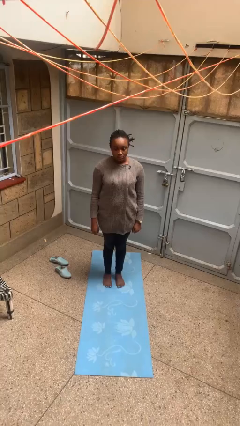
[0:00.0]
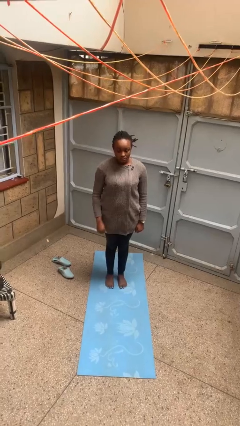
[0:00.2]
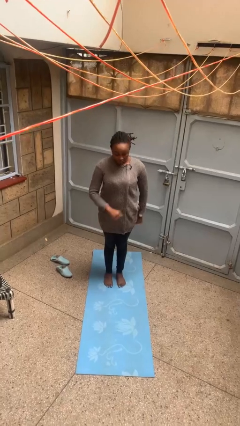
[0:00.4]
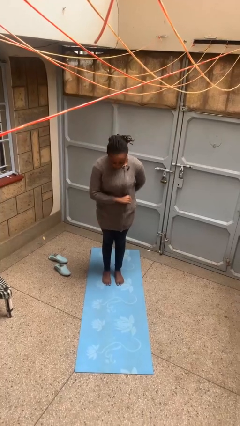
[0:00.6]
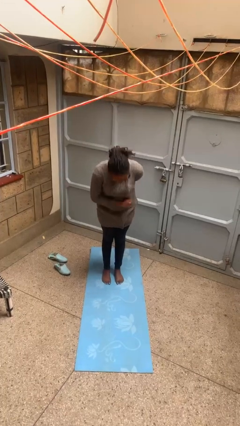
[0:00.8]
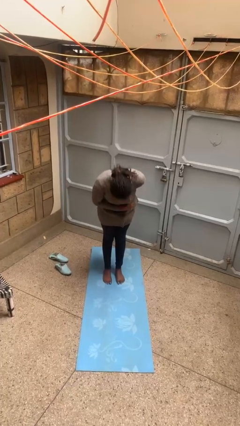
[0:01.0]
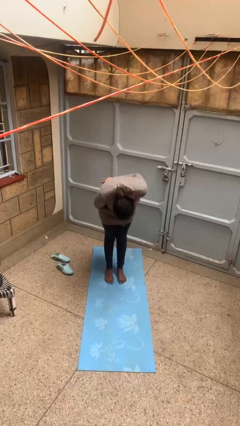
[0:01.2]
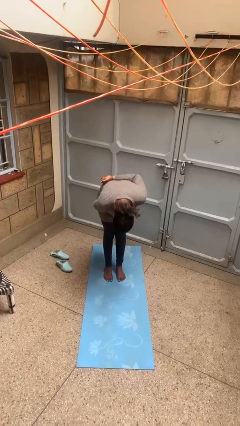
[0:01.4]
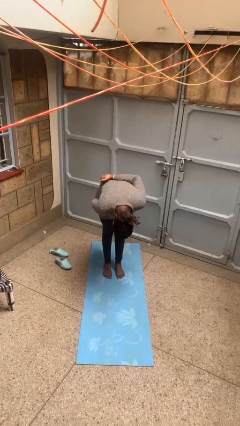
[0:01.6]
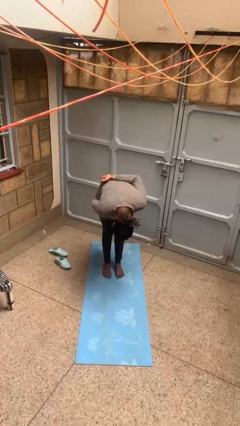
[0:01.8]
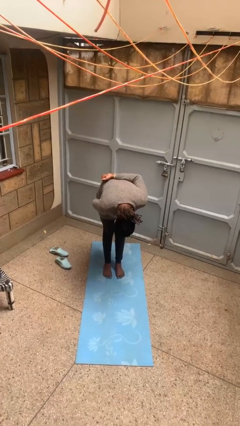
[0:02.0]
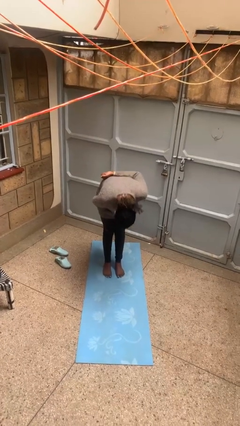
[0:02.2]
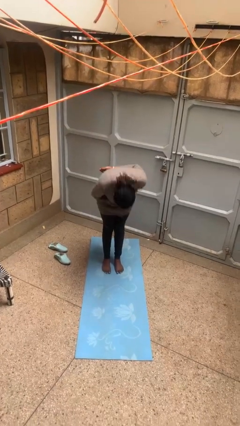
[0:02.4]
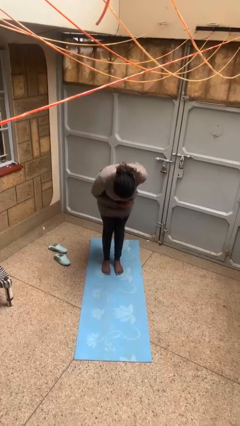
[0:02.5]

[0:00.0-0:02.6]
person bows

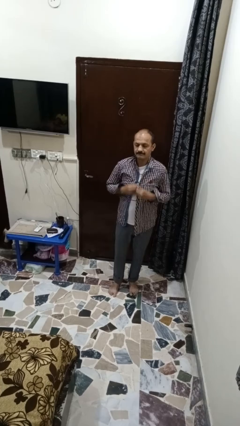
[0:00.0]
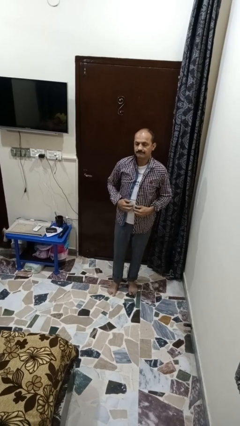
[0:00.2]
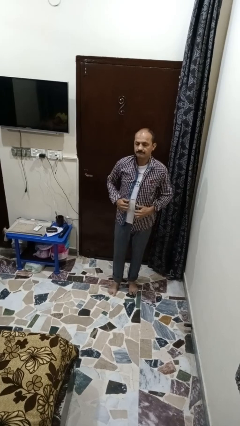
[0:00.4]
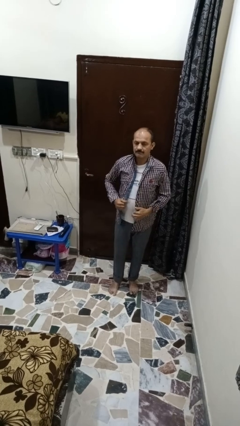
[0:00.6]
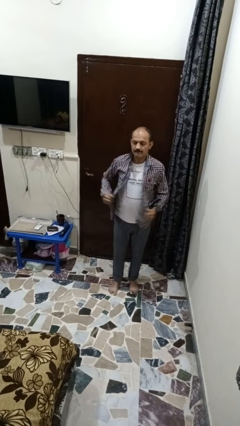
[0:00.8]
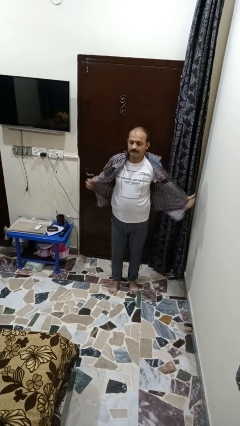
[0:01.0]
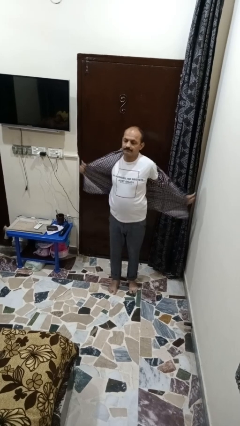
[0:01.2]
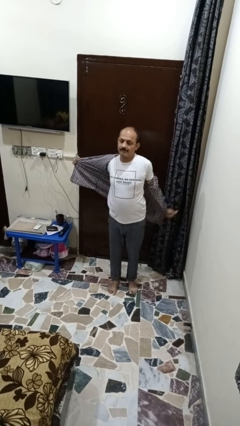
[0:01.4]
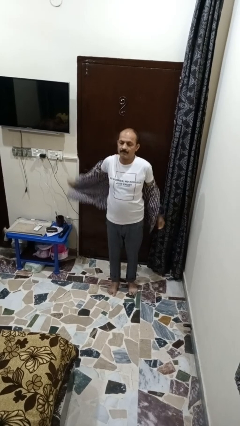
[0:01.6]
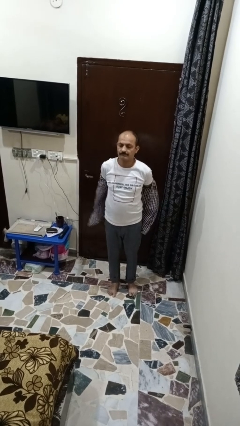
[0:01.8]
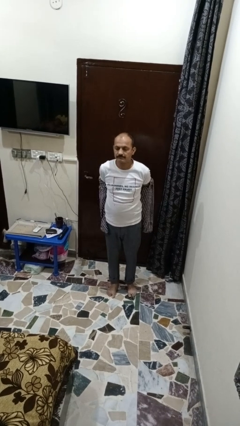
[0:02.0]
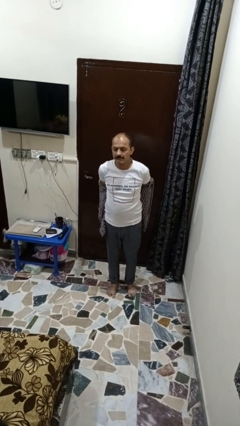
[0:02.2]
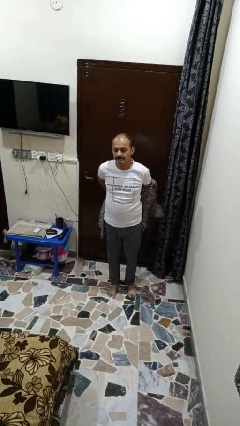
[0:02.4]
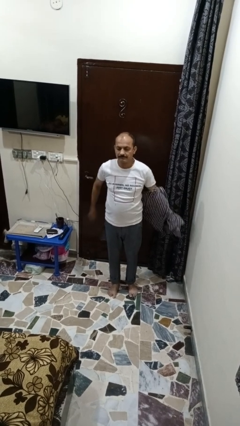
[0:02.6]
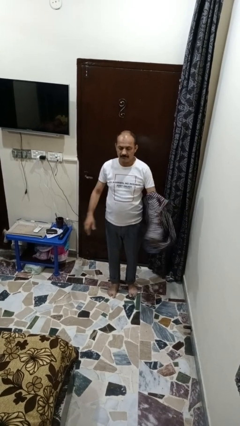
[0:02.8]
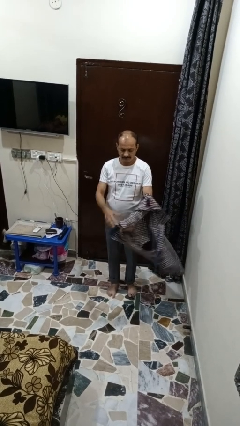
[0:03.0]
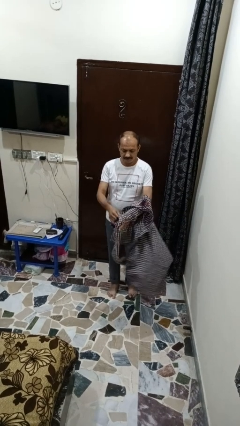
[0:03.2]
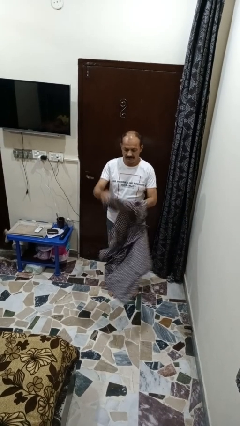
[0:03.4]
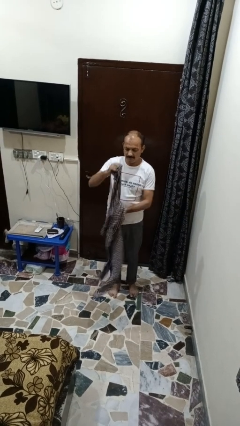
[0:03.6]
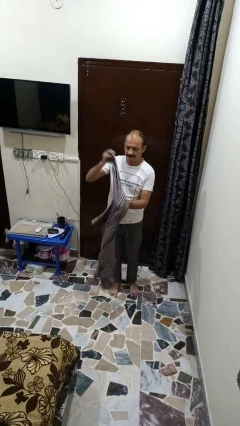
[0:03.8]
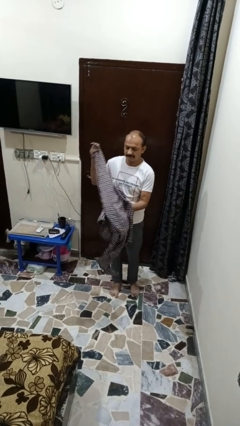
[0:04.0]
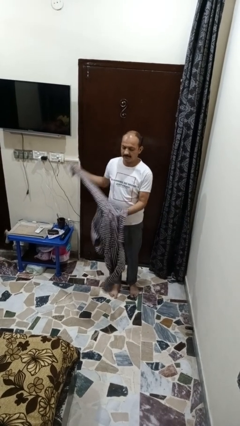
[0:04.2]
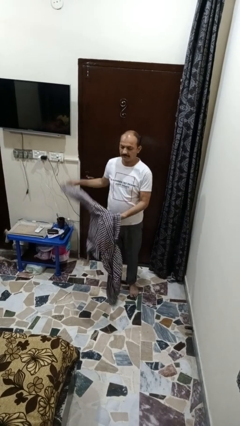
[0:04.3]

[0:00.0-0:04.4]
person takes off shirt

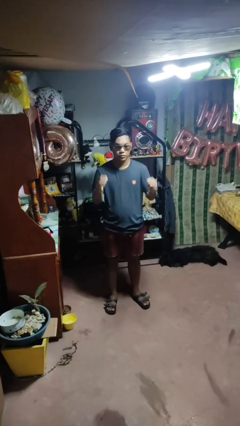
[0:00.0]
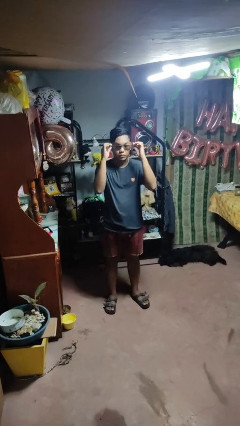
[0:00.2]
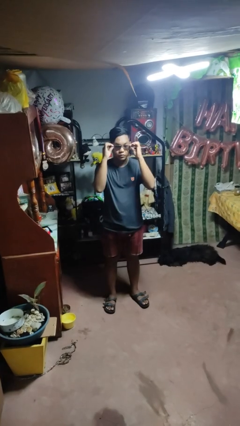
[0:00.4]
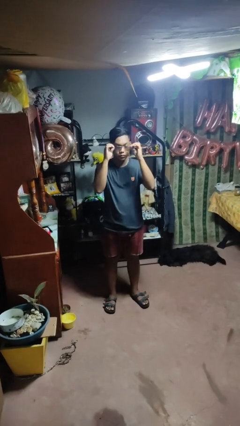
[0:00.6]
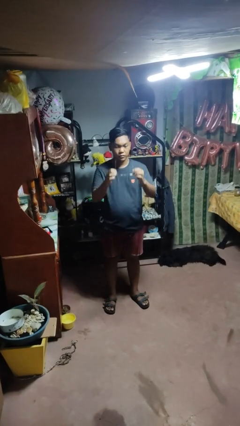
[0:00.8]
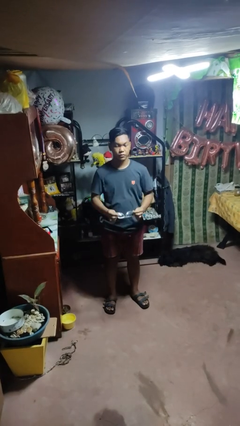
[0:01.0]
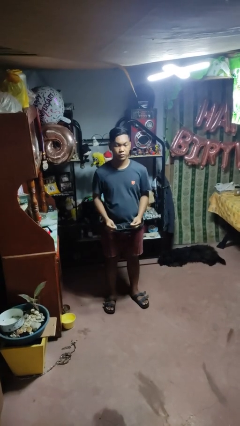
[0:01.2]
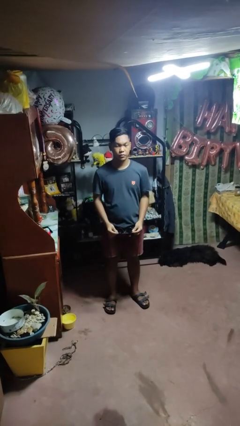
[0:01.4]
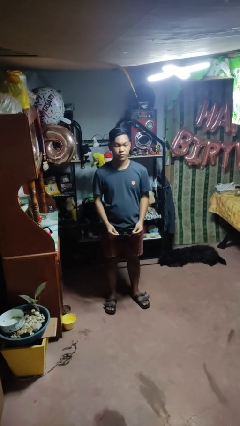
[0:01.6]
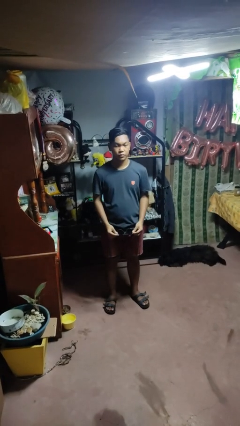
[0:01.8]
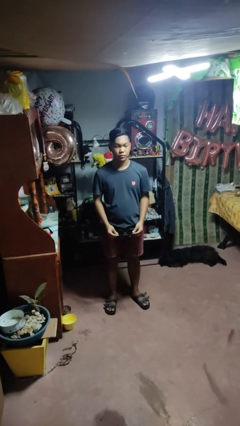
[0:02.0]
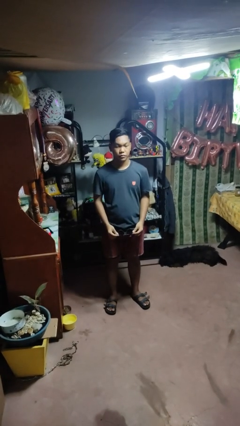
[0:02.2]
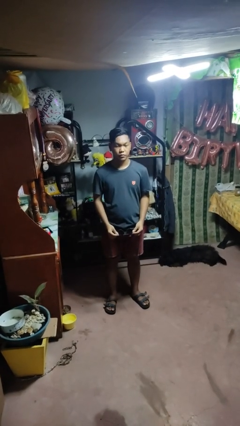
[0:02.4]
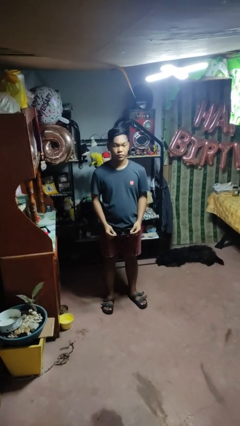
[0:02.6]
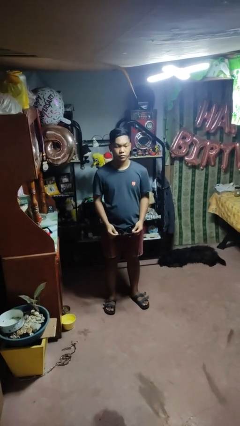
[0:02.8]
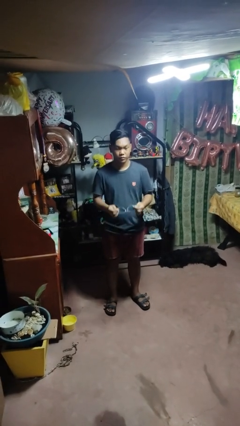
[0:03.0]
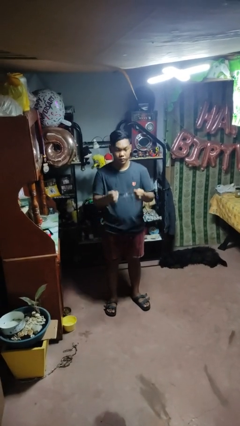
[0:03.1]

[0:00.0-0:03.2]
person takes off sunglasses

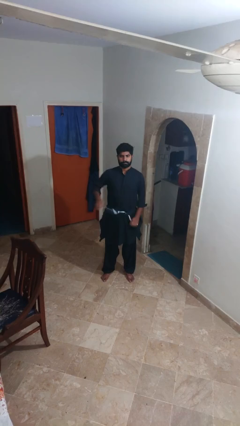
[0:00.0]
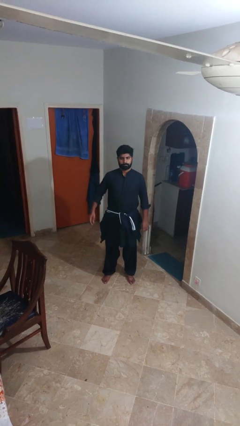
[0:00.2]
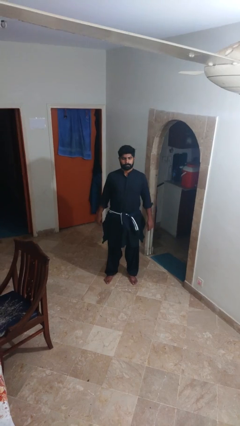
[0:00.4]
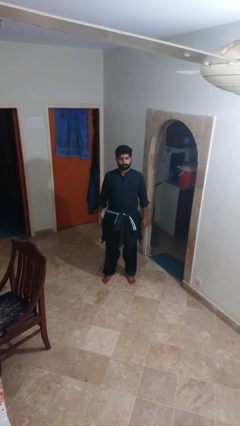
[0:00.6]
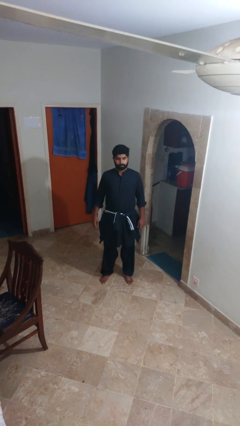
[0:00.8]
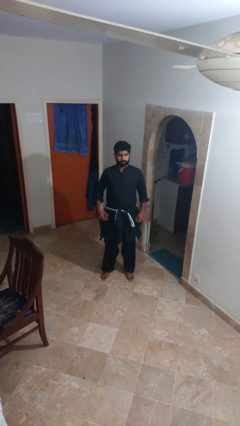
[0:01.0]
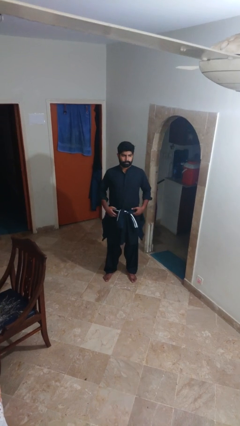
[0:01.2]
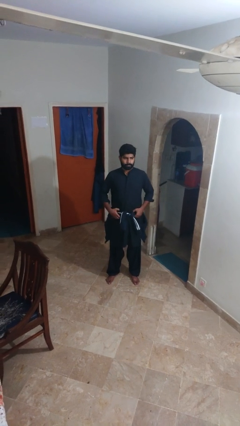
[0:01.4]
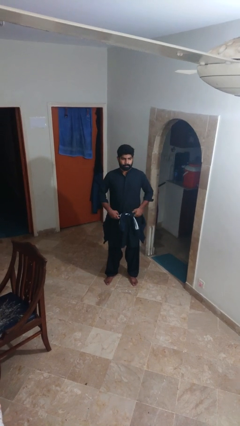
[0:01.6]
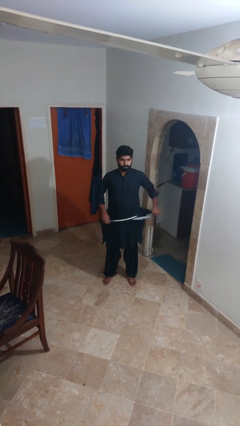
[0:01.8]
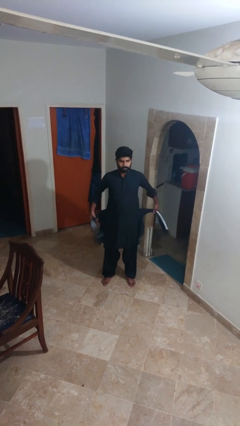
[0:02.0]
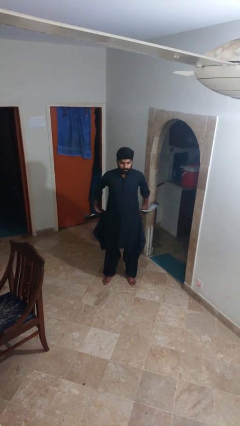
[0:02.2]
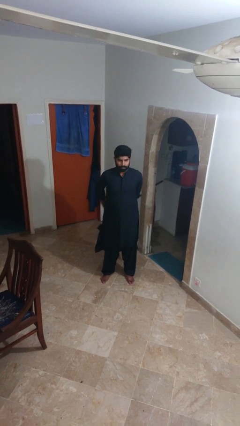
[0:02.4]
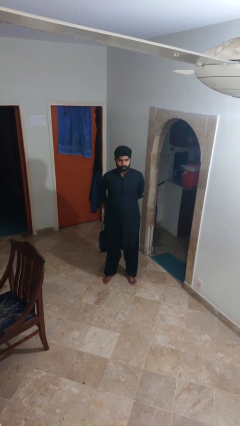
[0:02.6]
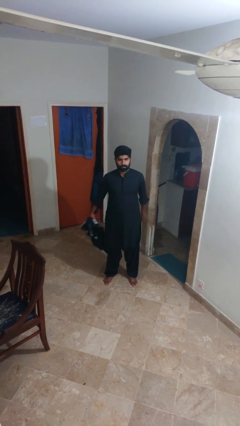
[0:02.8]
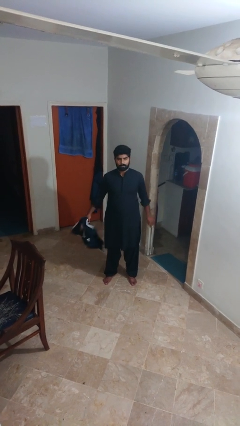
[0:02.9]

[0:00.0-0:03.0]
person unties jacket around waist

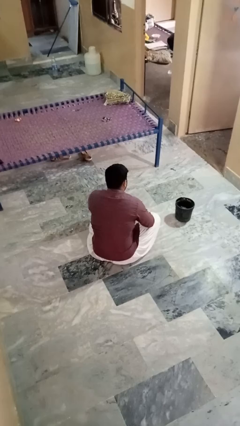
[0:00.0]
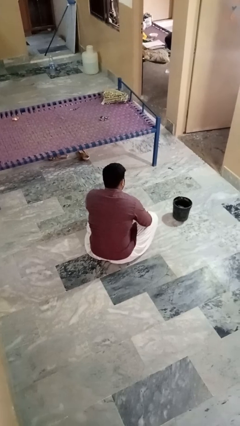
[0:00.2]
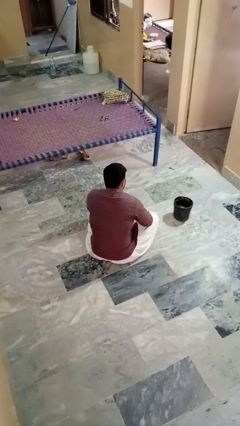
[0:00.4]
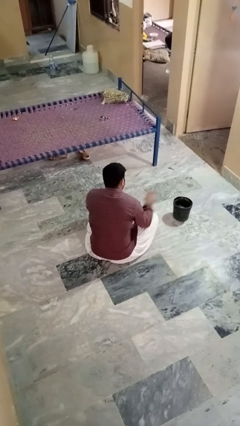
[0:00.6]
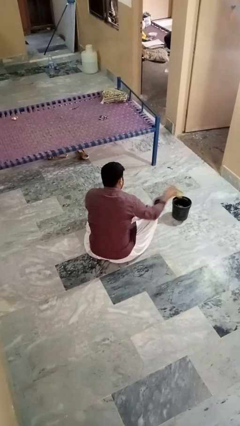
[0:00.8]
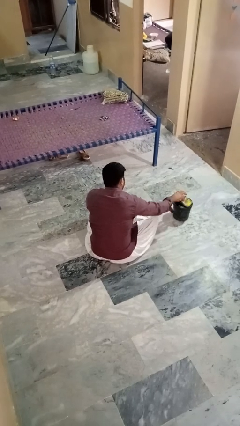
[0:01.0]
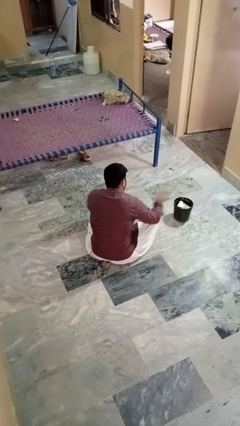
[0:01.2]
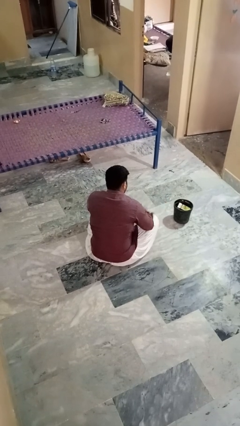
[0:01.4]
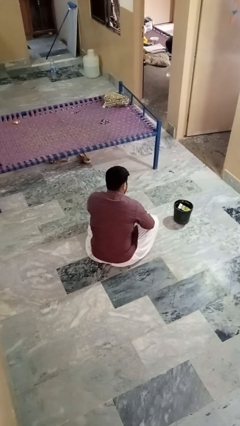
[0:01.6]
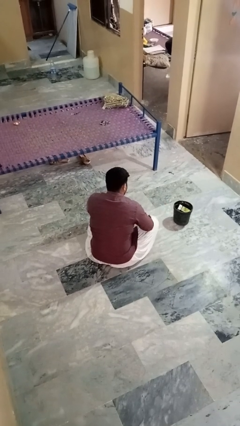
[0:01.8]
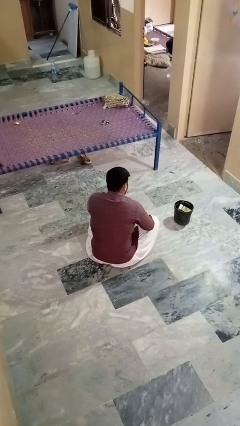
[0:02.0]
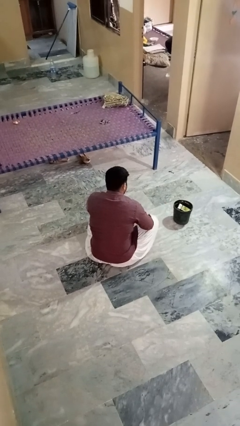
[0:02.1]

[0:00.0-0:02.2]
person puts object into basket

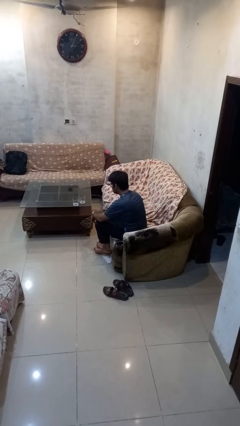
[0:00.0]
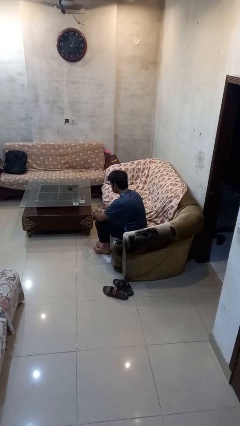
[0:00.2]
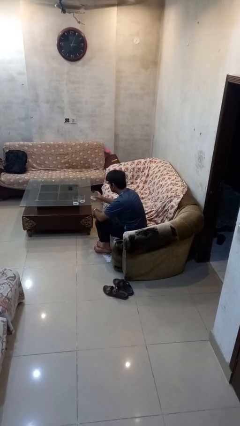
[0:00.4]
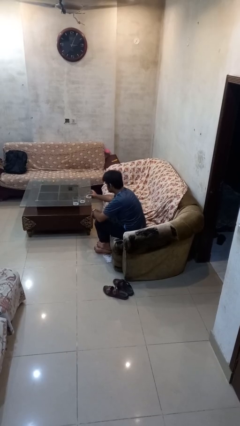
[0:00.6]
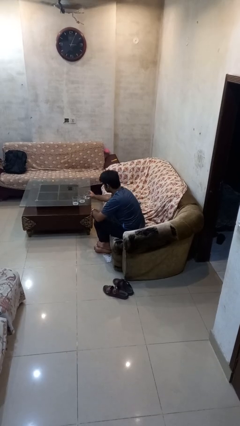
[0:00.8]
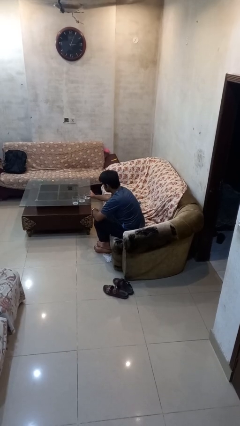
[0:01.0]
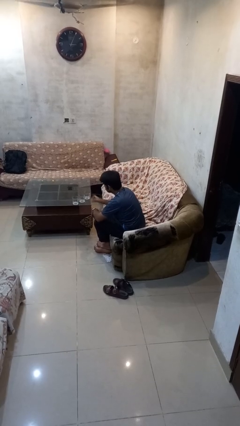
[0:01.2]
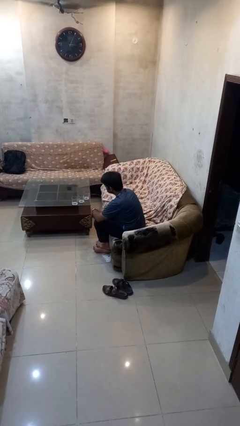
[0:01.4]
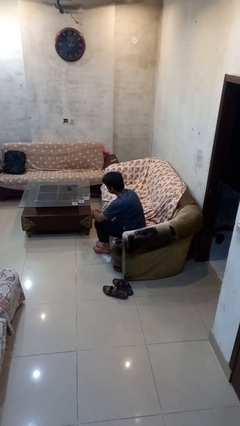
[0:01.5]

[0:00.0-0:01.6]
person puts down object on table

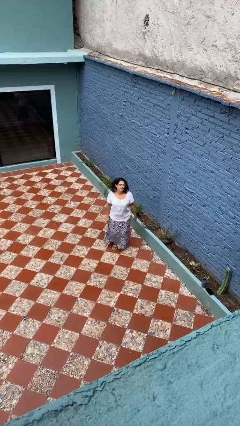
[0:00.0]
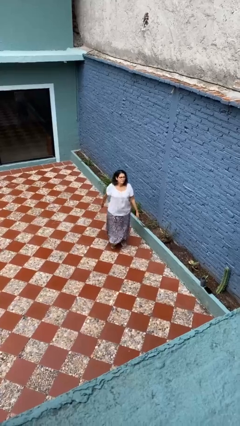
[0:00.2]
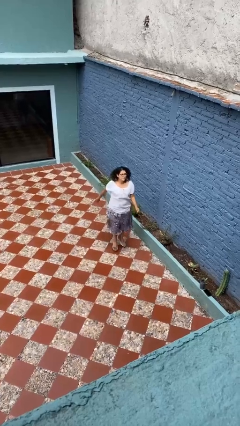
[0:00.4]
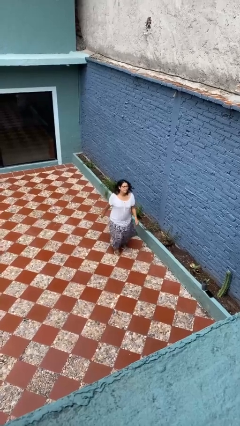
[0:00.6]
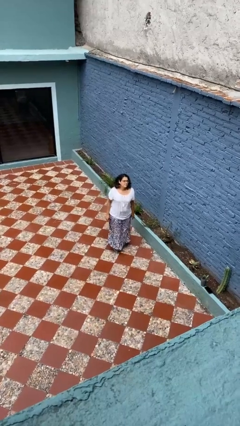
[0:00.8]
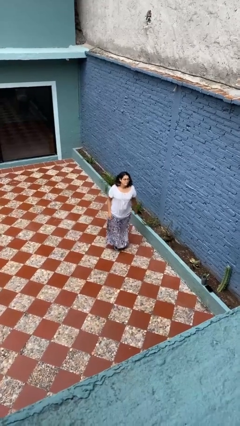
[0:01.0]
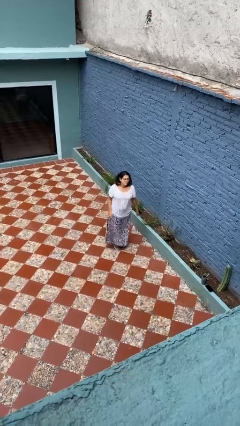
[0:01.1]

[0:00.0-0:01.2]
person jumps
